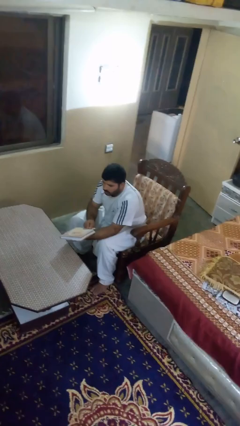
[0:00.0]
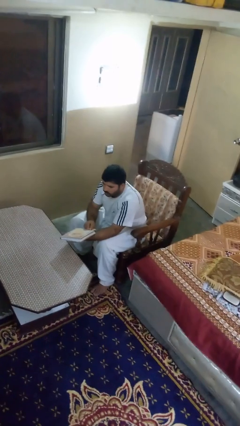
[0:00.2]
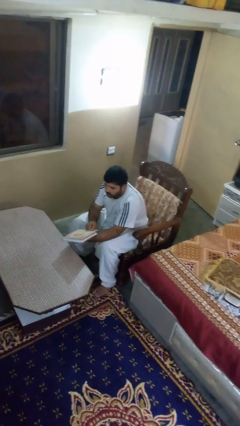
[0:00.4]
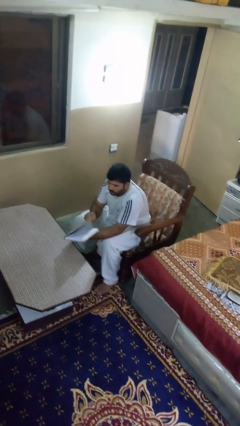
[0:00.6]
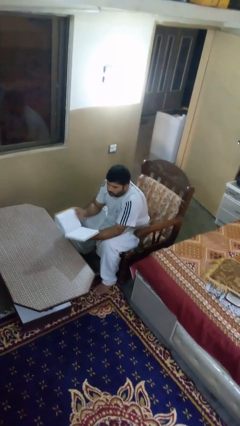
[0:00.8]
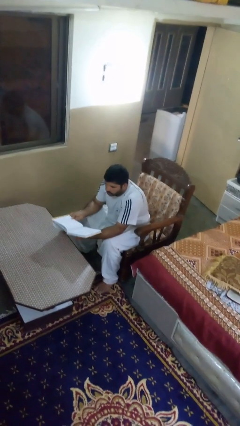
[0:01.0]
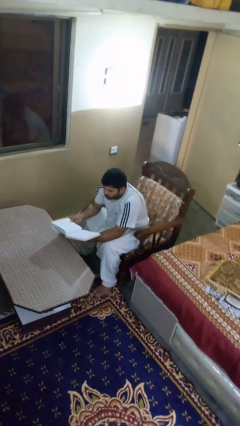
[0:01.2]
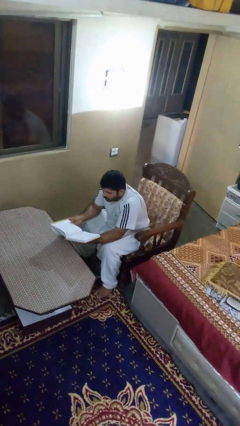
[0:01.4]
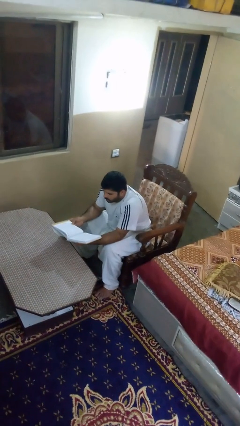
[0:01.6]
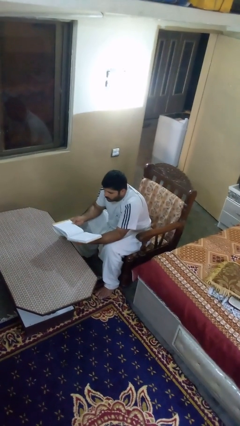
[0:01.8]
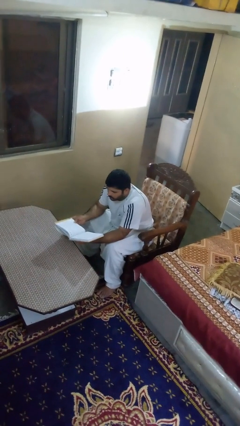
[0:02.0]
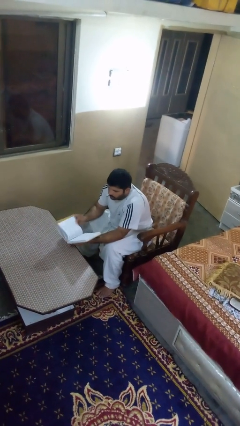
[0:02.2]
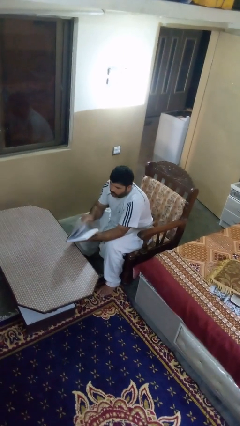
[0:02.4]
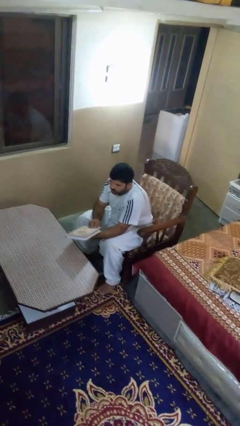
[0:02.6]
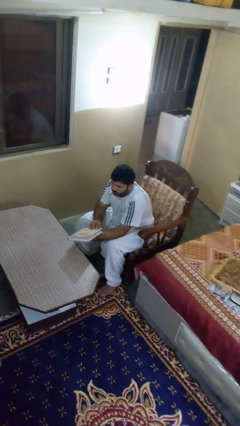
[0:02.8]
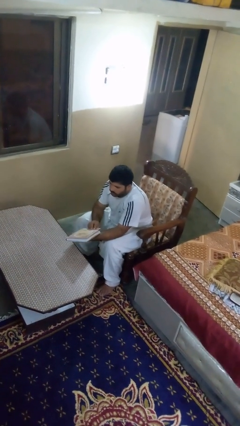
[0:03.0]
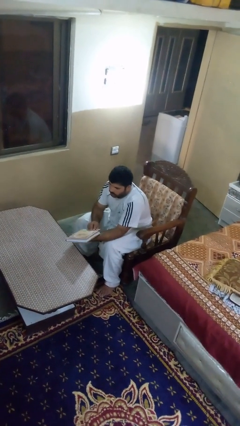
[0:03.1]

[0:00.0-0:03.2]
person reads book

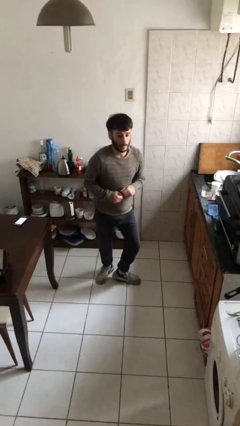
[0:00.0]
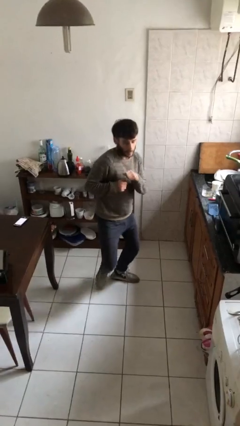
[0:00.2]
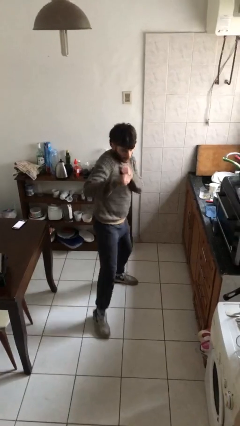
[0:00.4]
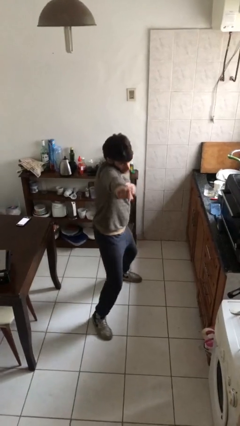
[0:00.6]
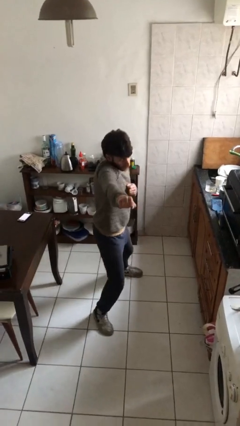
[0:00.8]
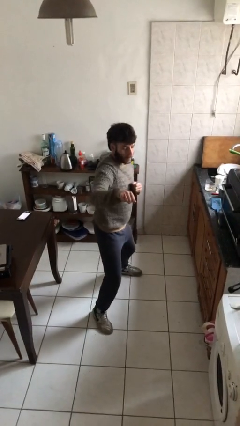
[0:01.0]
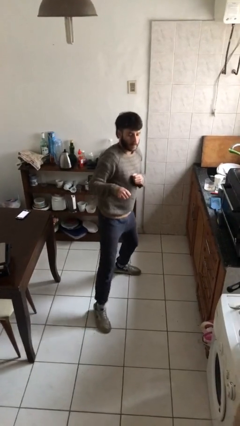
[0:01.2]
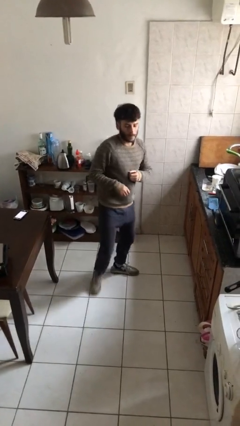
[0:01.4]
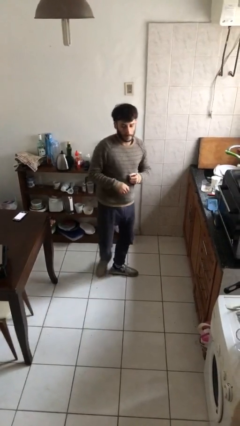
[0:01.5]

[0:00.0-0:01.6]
person karate chop

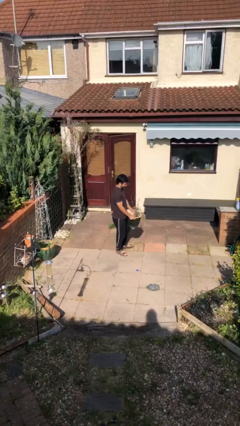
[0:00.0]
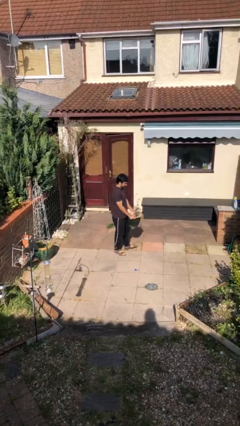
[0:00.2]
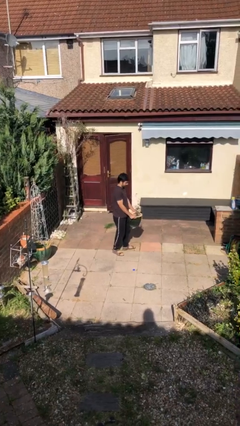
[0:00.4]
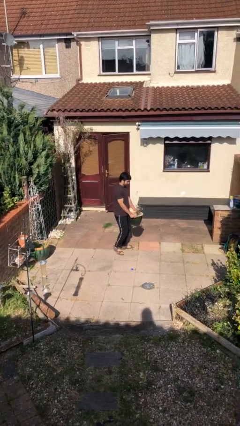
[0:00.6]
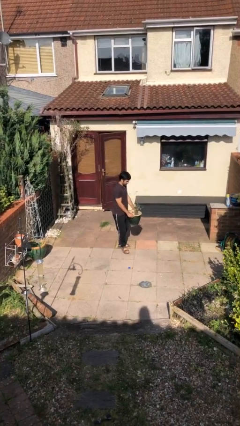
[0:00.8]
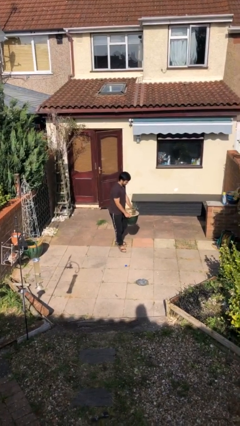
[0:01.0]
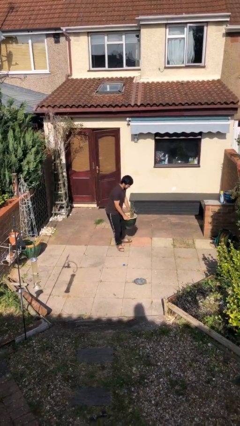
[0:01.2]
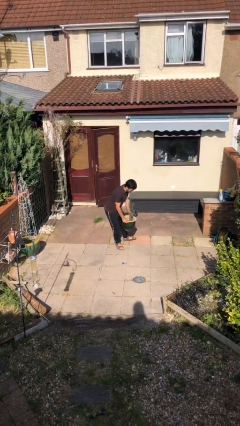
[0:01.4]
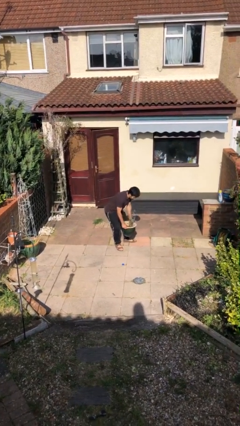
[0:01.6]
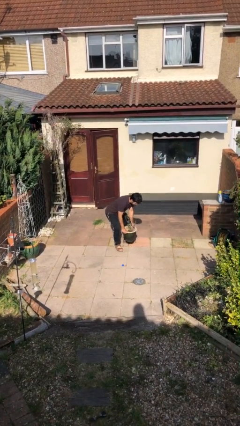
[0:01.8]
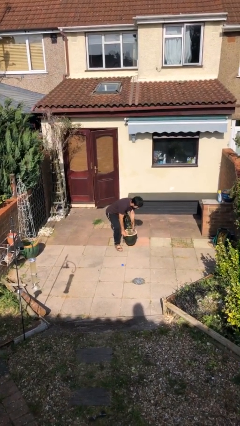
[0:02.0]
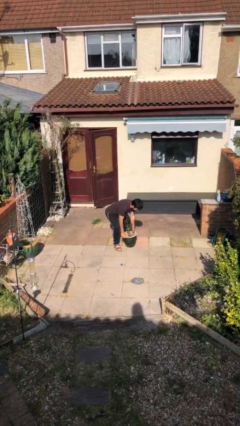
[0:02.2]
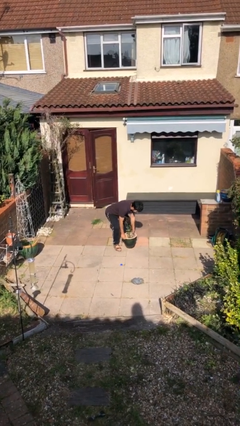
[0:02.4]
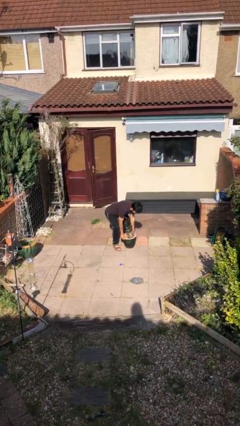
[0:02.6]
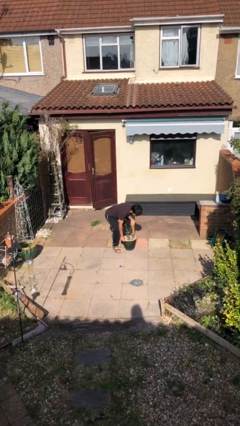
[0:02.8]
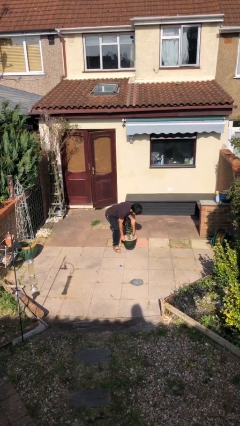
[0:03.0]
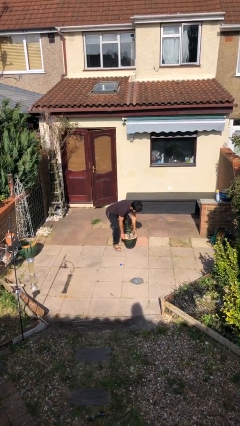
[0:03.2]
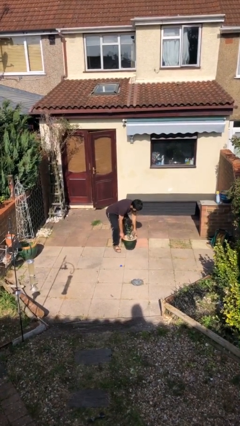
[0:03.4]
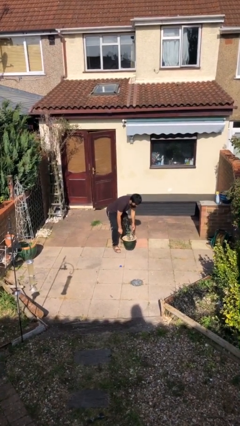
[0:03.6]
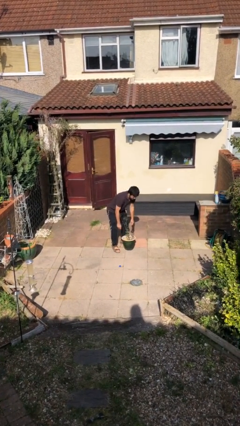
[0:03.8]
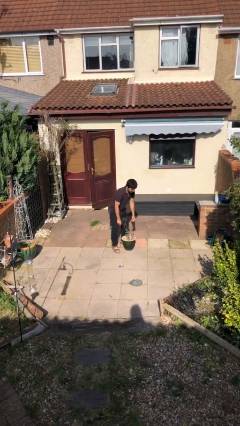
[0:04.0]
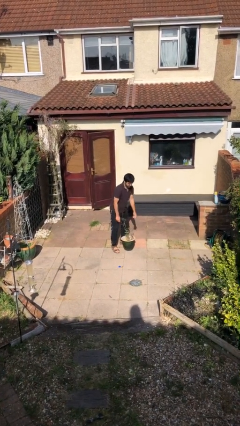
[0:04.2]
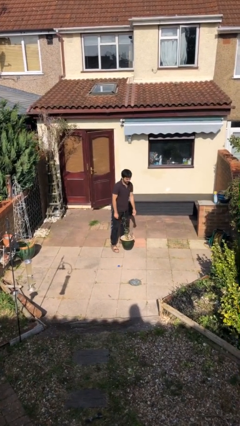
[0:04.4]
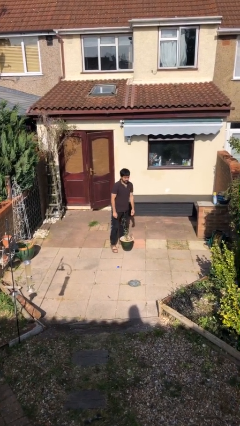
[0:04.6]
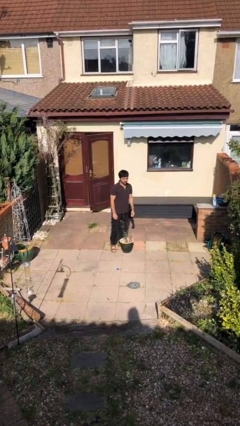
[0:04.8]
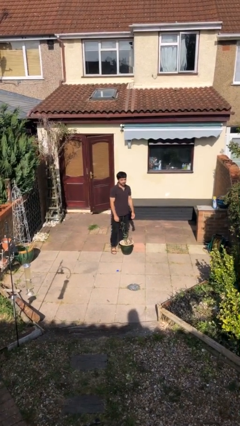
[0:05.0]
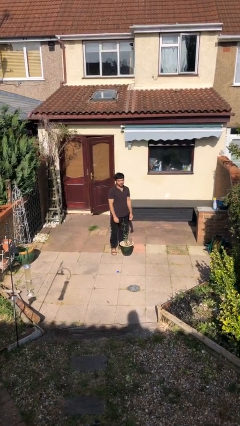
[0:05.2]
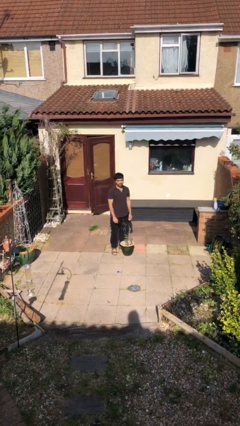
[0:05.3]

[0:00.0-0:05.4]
person puts down object on floor

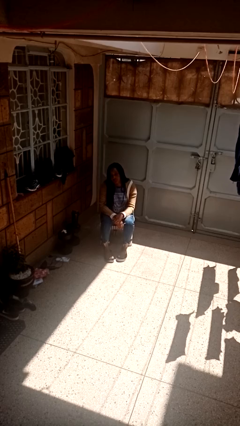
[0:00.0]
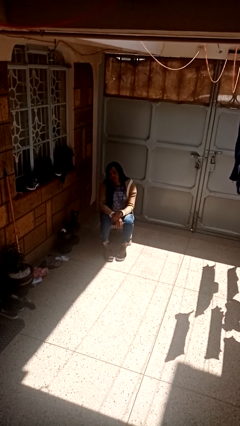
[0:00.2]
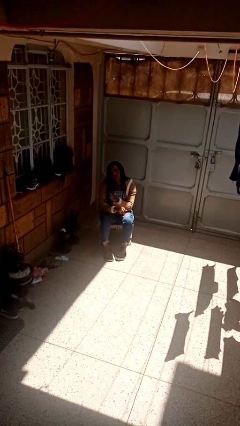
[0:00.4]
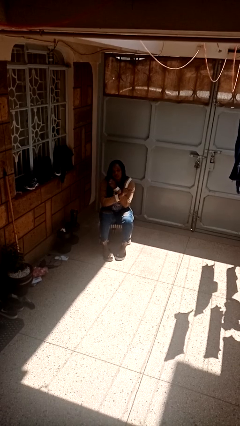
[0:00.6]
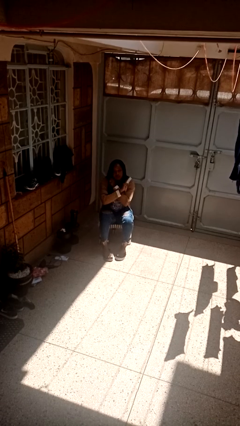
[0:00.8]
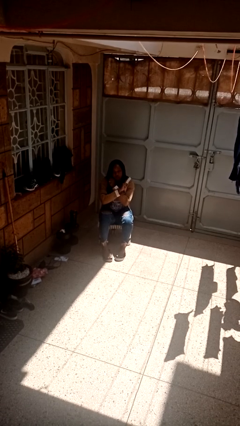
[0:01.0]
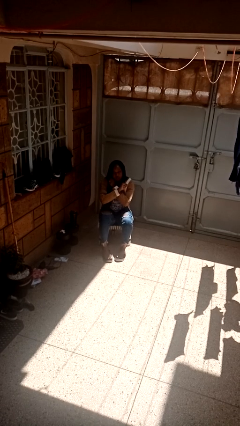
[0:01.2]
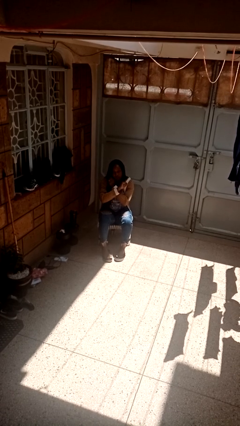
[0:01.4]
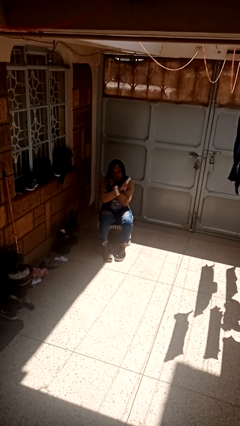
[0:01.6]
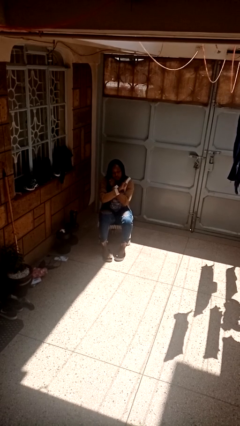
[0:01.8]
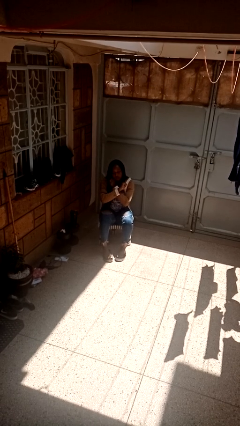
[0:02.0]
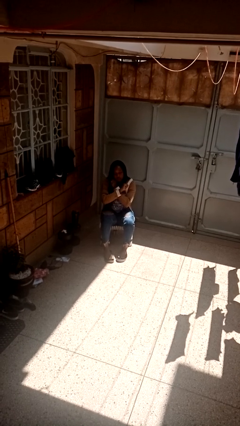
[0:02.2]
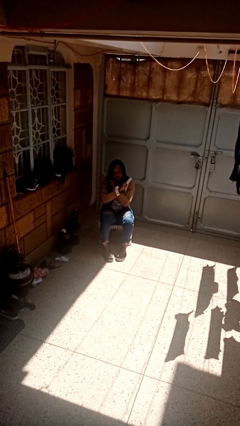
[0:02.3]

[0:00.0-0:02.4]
person gestures arms x

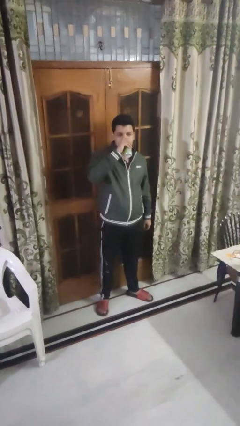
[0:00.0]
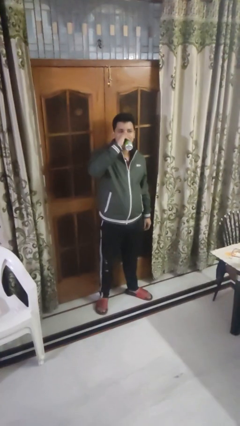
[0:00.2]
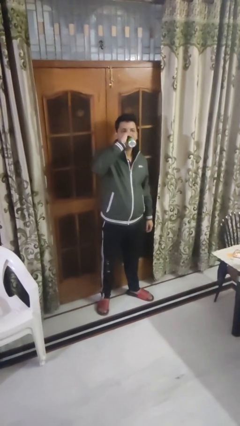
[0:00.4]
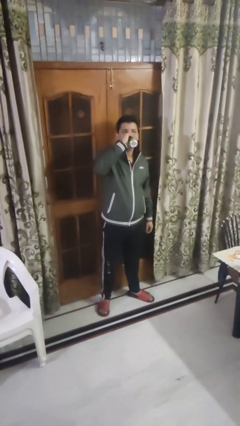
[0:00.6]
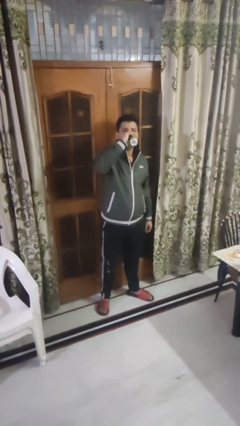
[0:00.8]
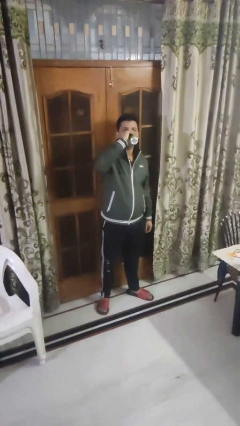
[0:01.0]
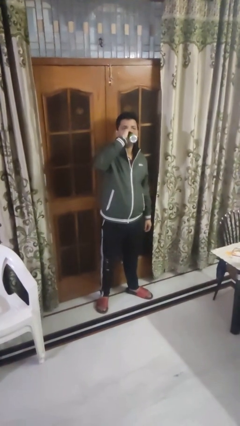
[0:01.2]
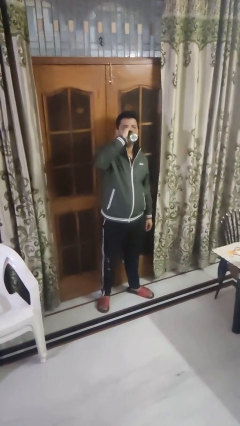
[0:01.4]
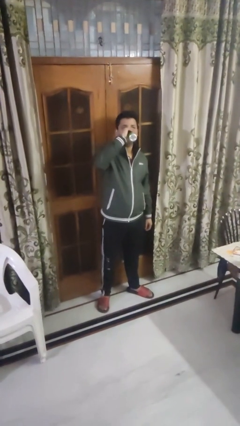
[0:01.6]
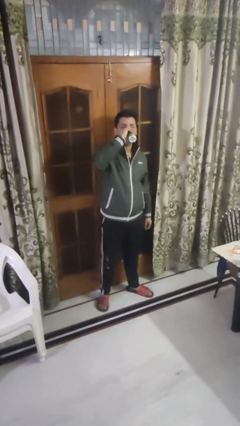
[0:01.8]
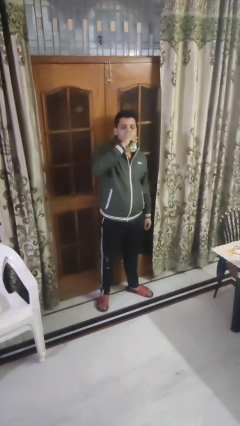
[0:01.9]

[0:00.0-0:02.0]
person drinks from beverage can

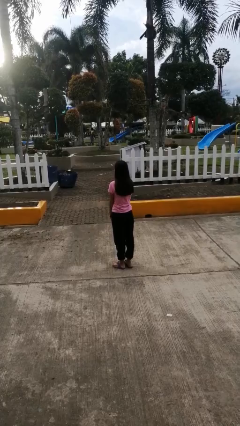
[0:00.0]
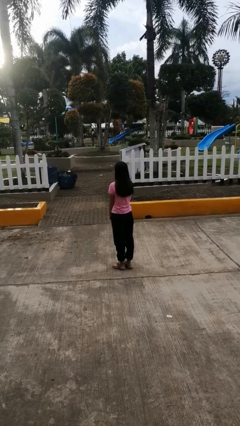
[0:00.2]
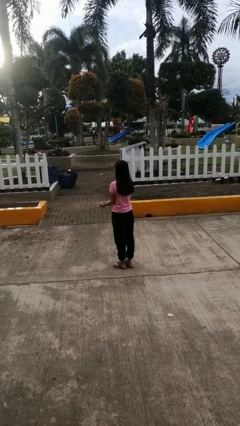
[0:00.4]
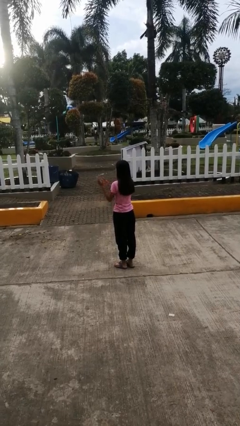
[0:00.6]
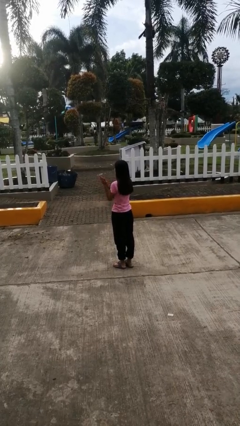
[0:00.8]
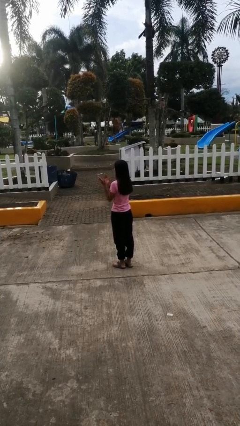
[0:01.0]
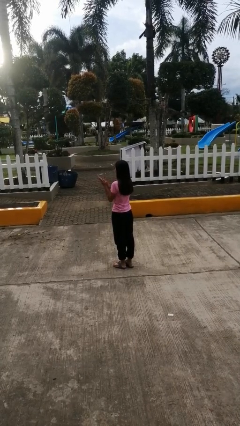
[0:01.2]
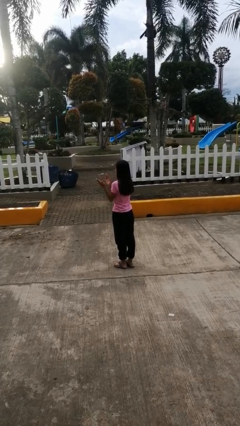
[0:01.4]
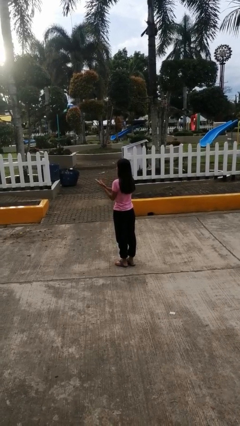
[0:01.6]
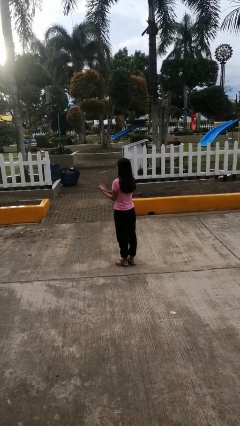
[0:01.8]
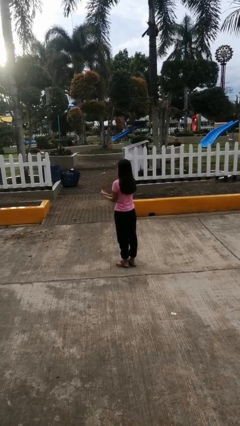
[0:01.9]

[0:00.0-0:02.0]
person claps hands

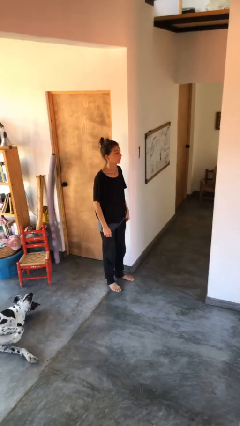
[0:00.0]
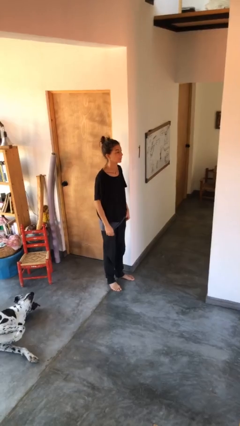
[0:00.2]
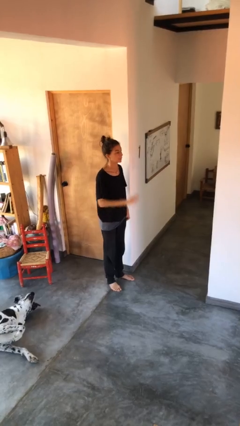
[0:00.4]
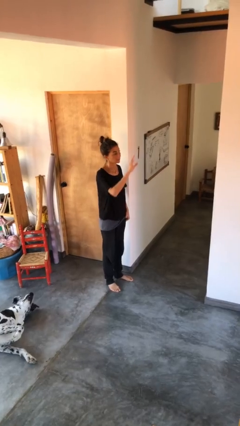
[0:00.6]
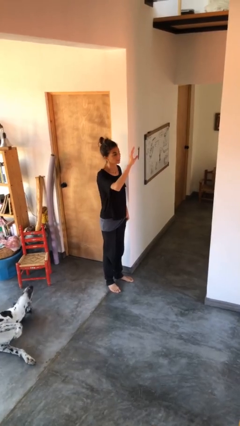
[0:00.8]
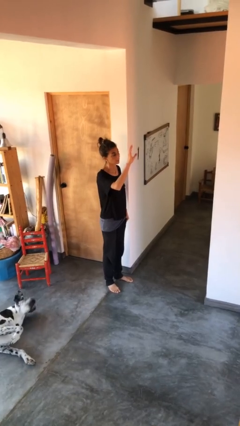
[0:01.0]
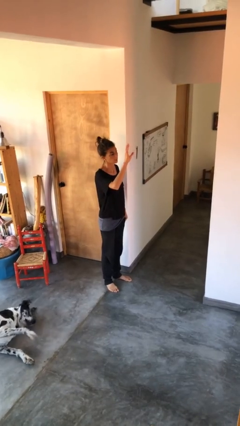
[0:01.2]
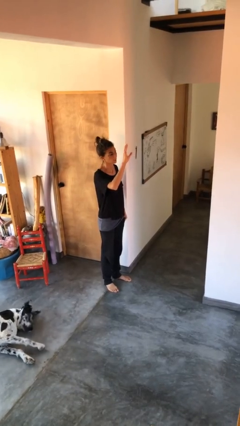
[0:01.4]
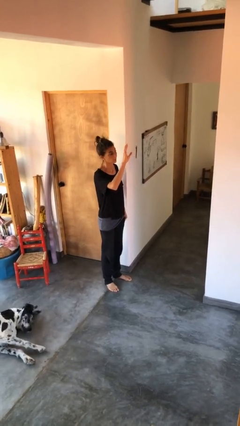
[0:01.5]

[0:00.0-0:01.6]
person gestures raise hand
